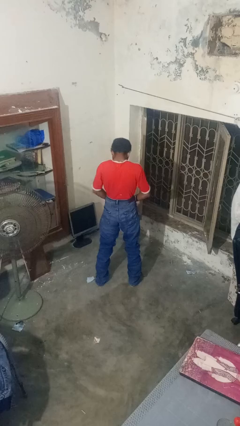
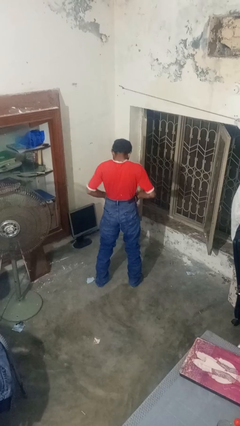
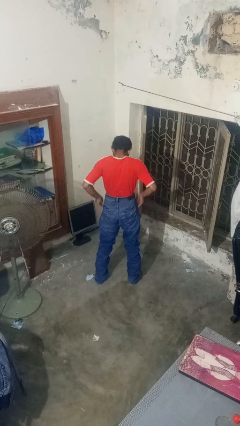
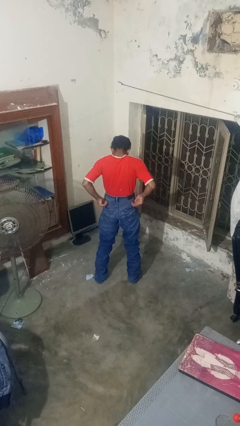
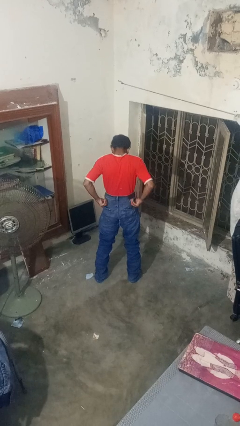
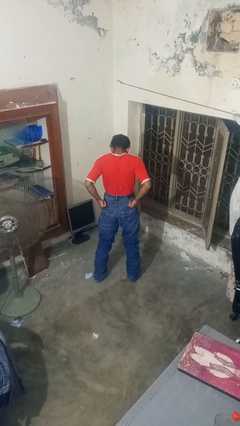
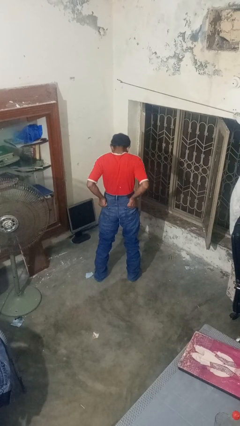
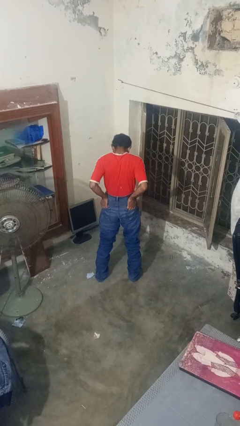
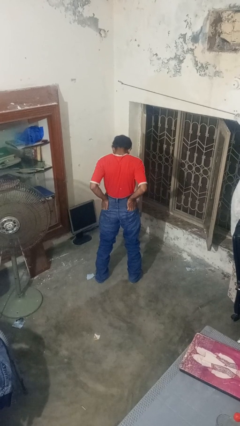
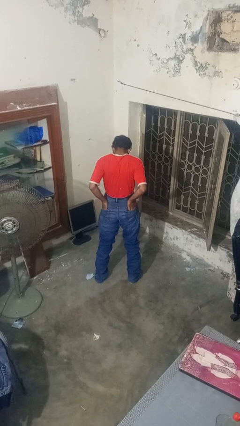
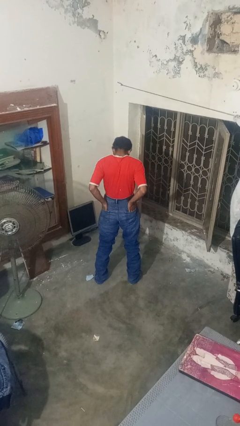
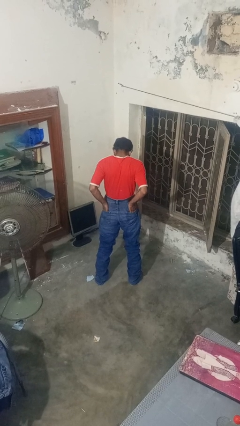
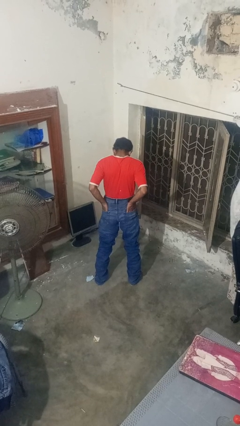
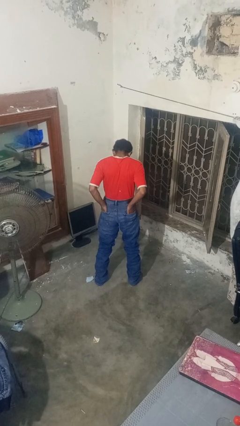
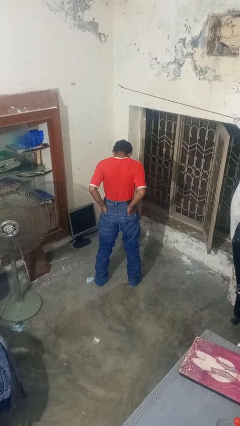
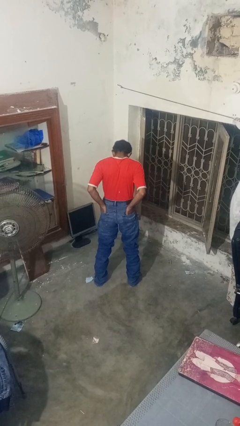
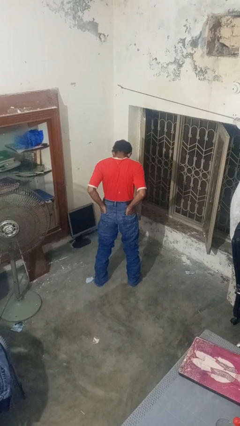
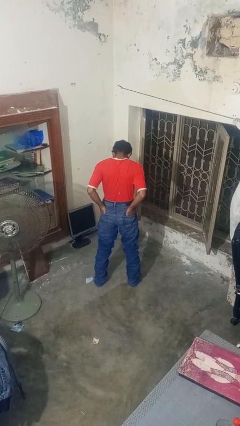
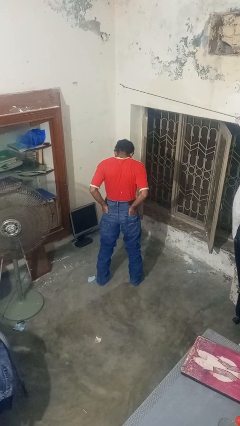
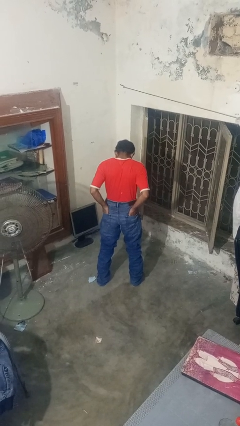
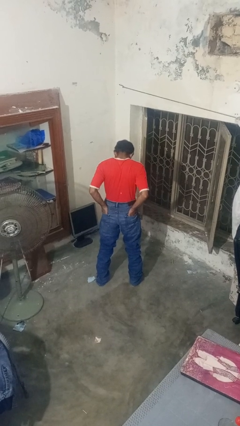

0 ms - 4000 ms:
person puts hands in back pockets

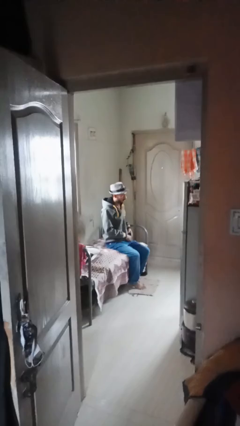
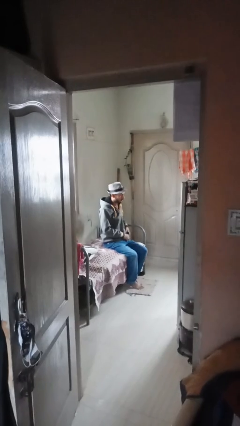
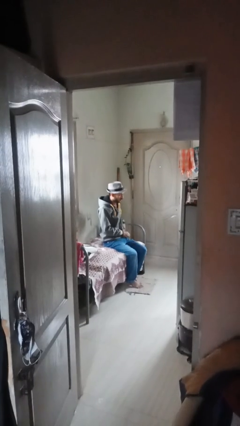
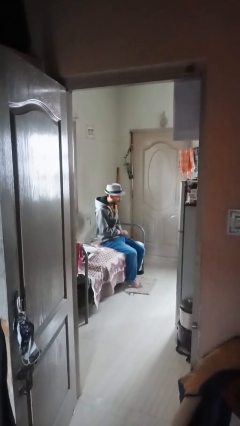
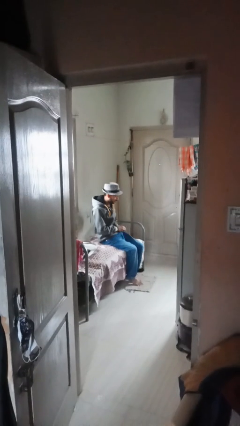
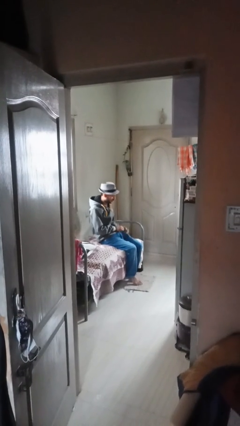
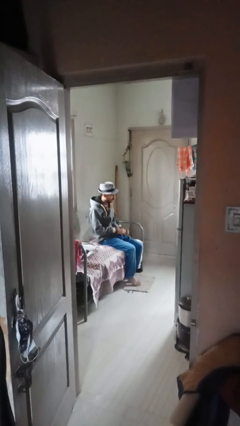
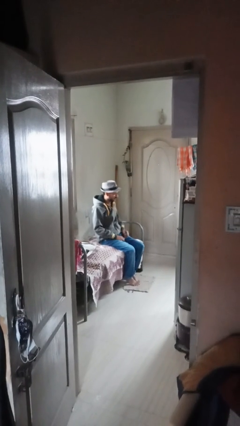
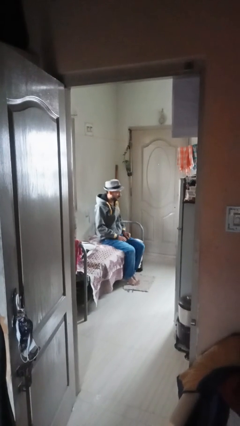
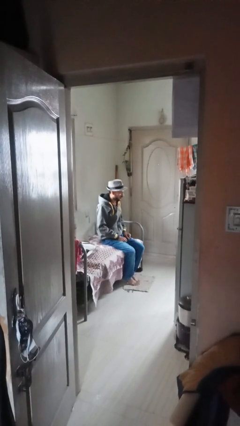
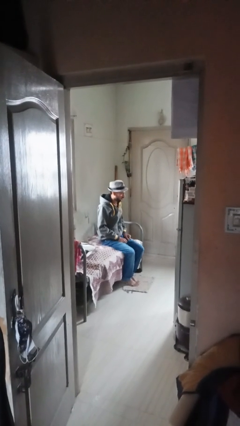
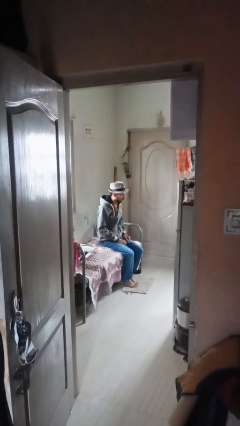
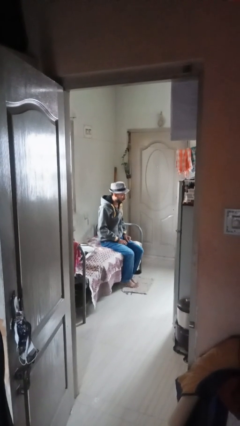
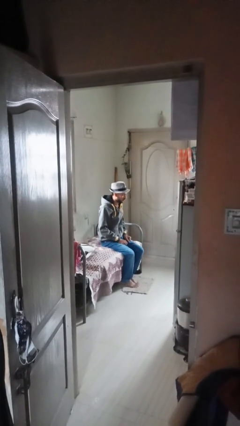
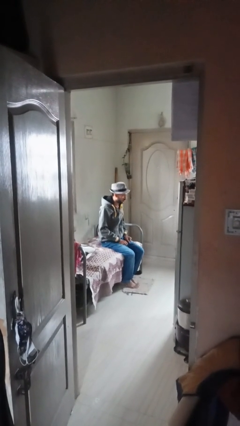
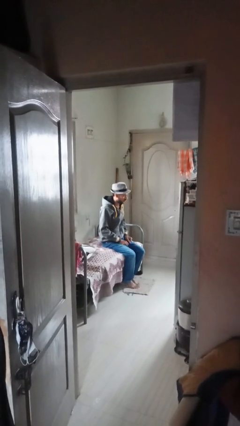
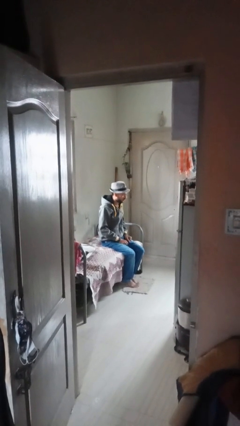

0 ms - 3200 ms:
person puts phone into pocket

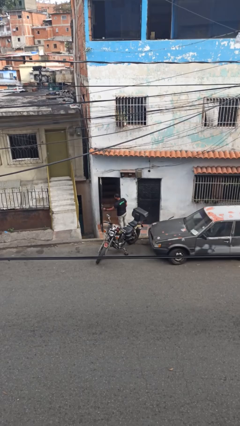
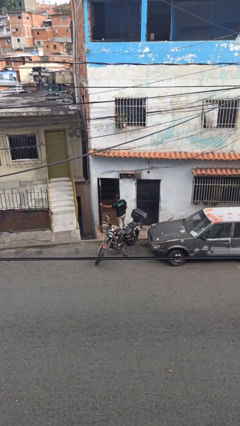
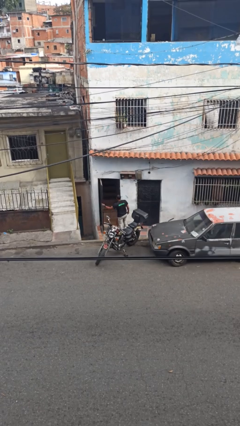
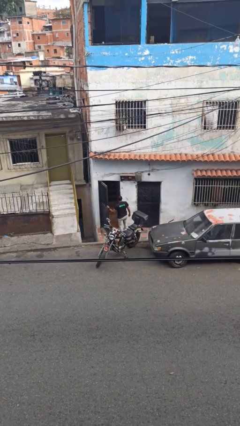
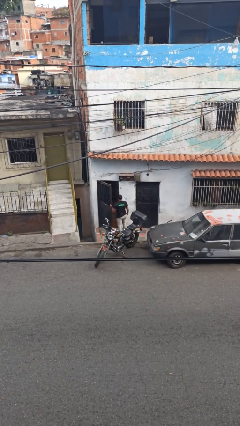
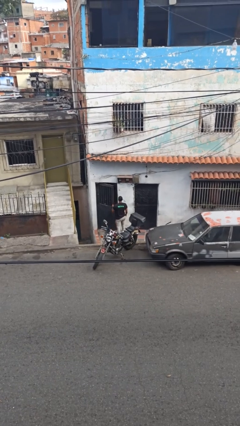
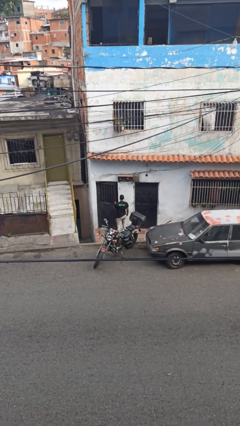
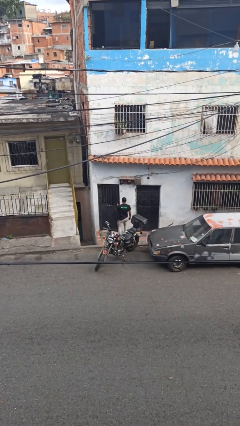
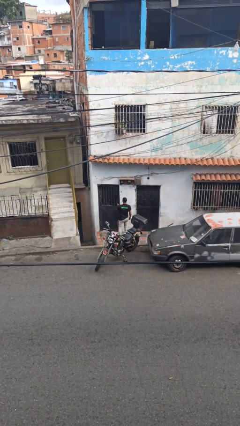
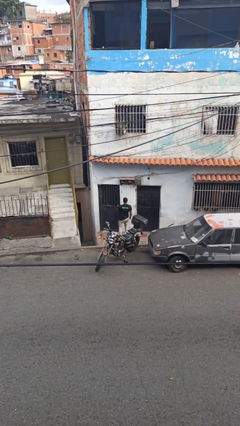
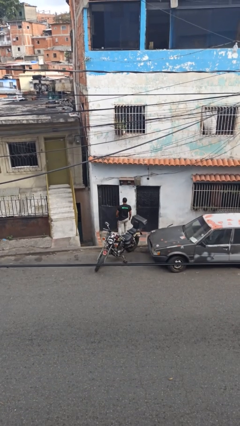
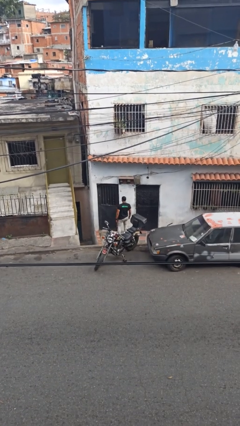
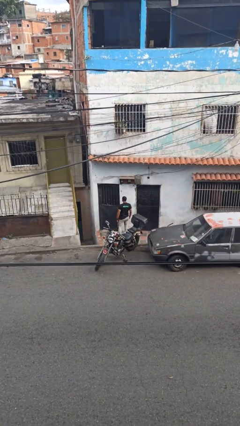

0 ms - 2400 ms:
person closes facility door

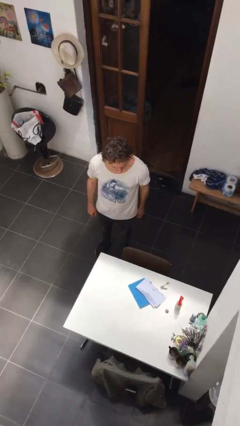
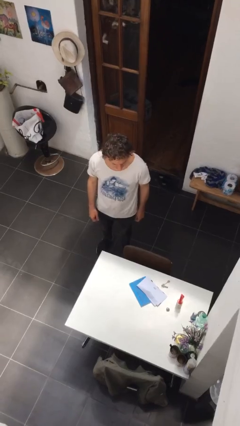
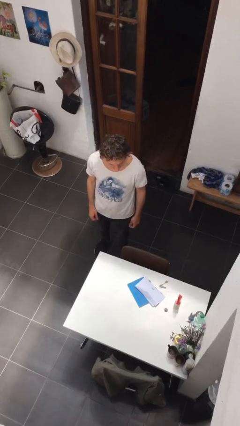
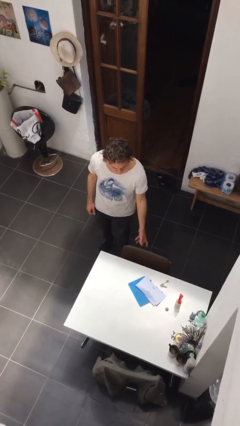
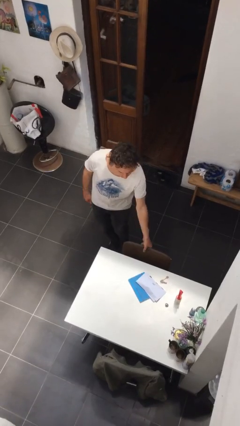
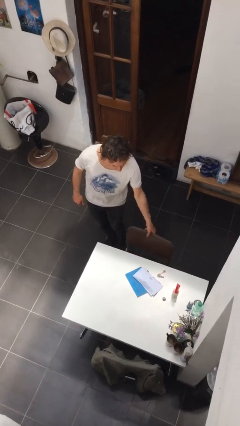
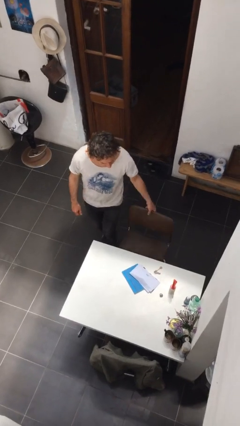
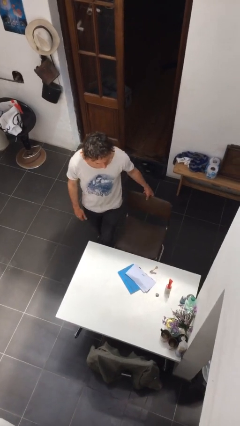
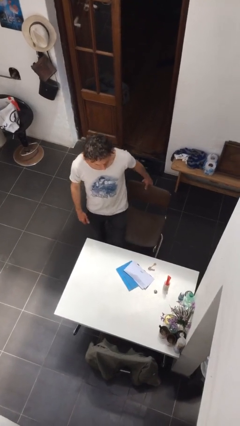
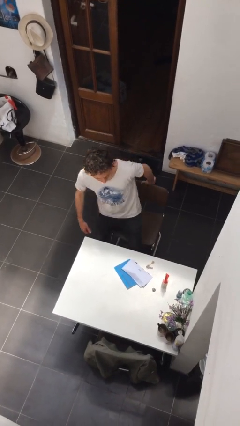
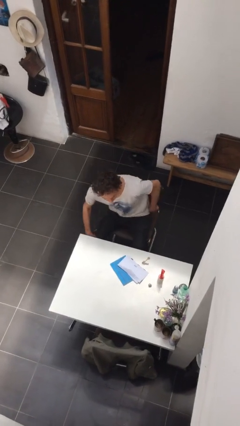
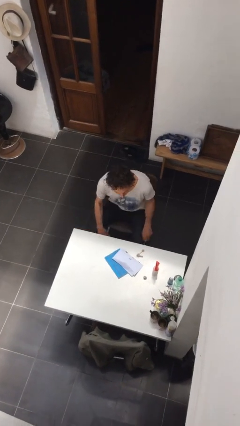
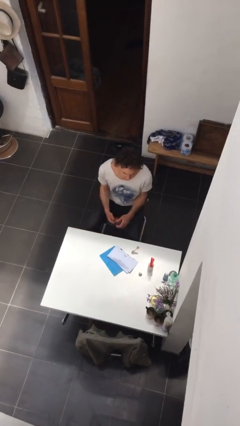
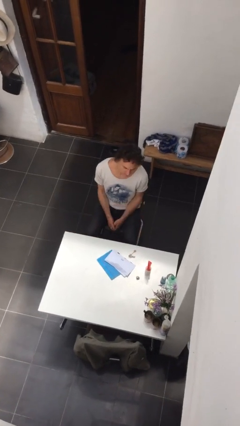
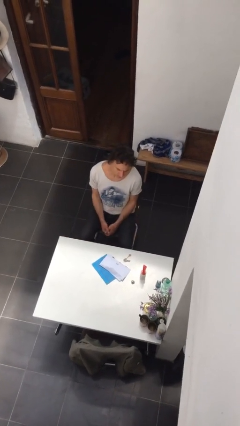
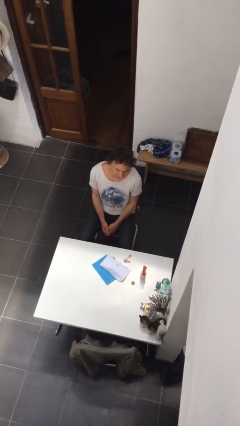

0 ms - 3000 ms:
person sits down

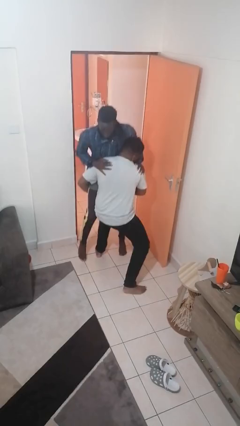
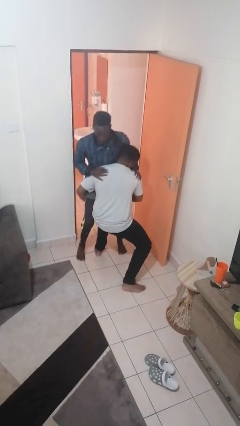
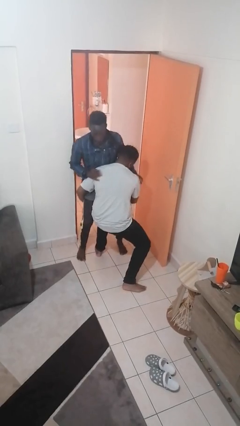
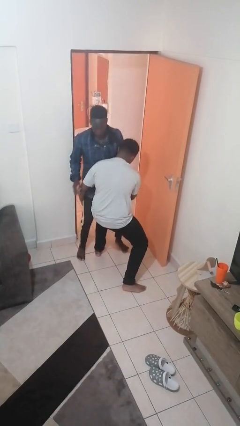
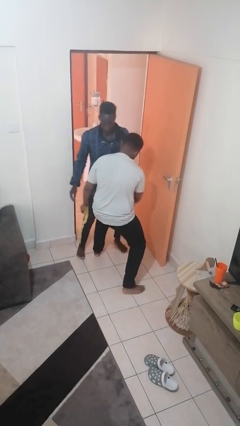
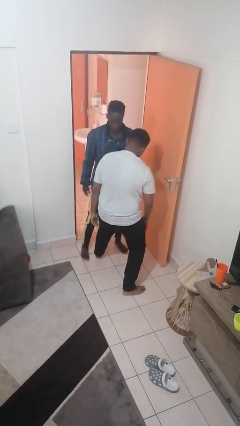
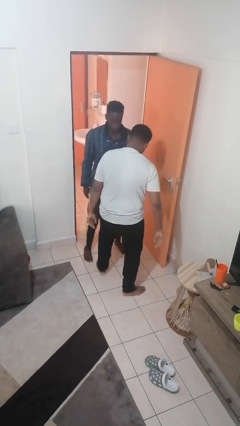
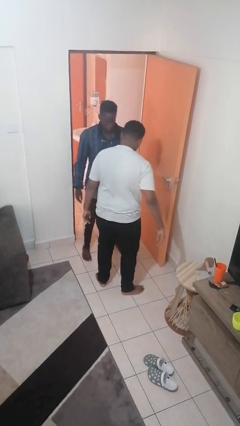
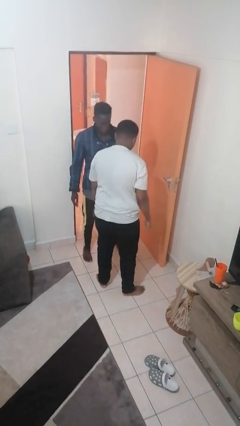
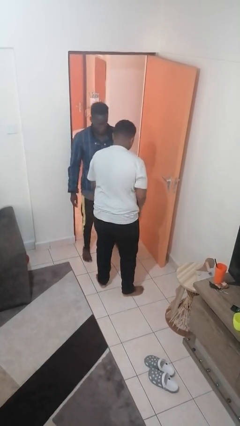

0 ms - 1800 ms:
person puts down person

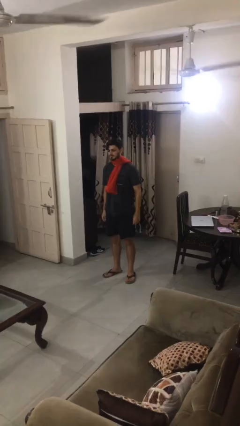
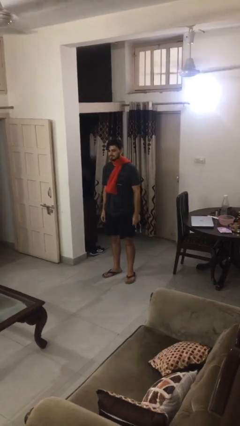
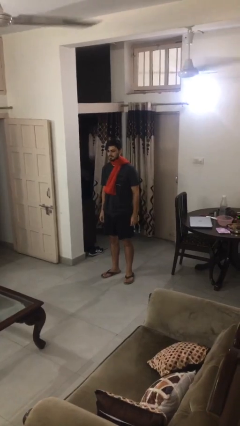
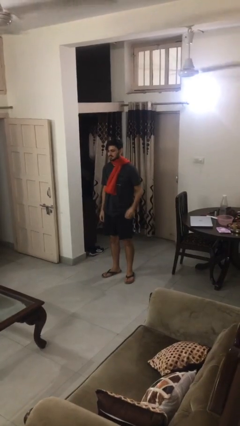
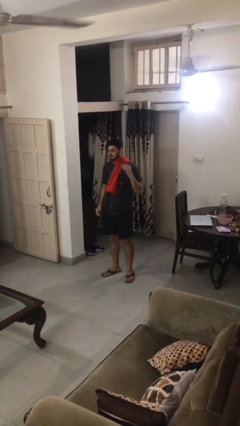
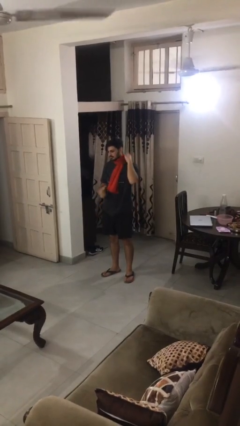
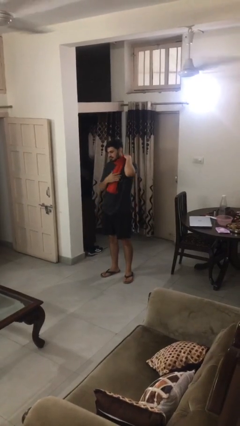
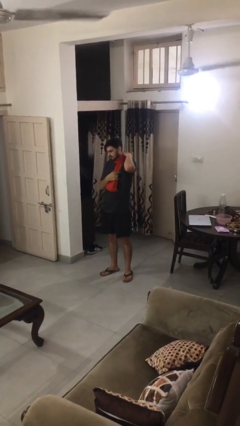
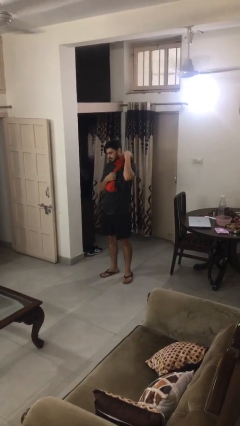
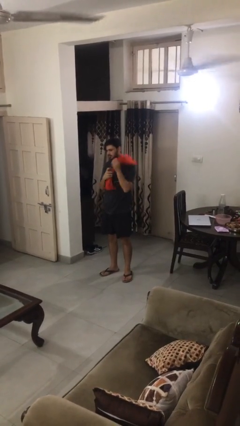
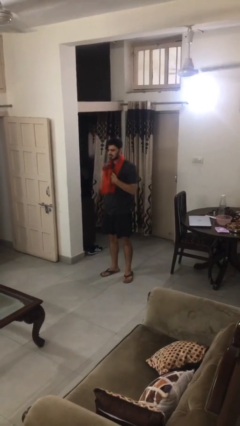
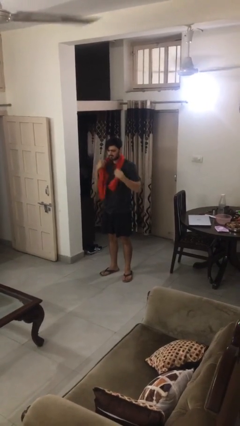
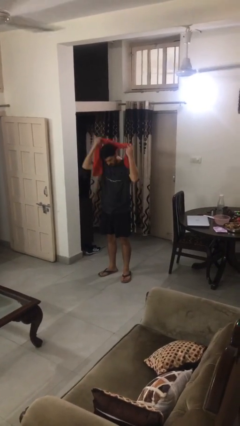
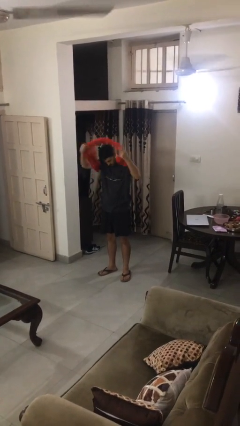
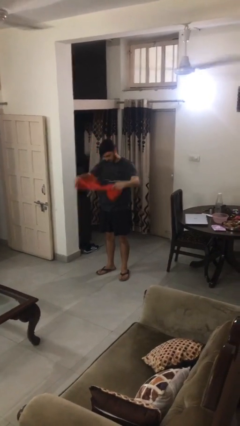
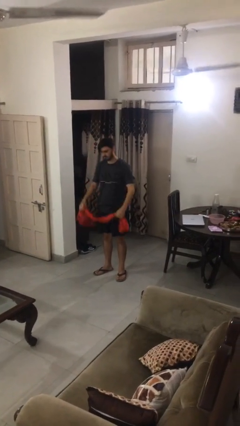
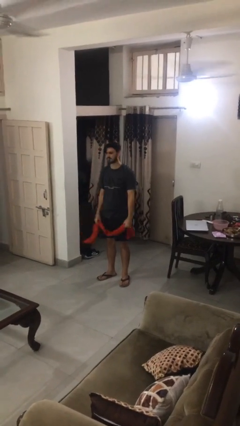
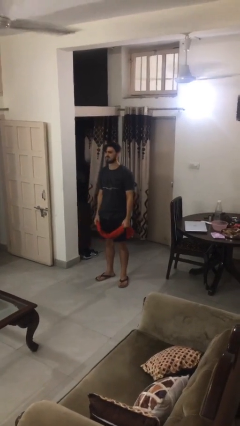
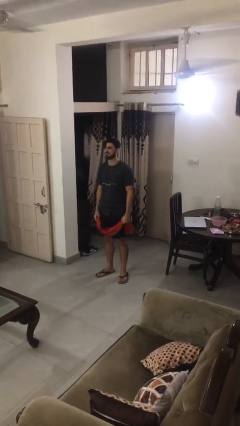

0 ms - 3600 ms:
person takes off scarf
